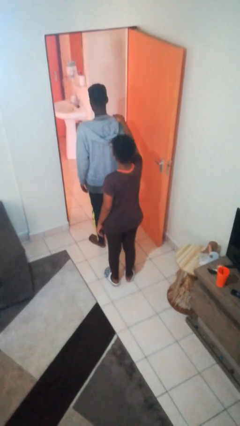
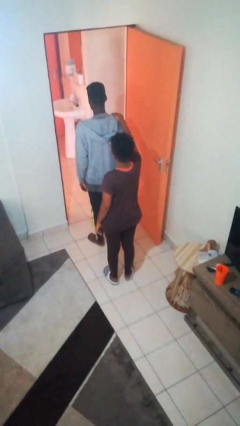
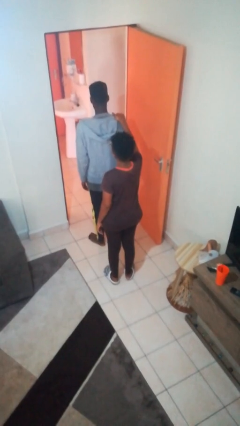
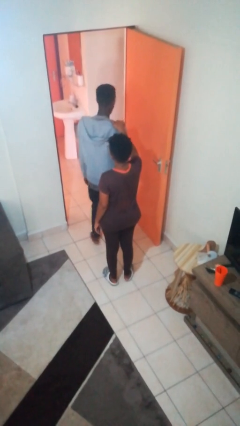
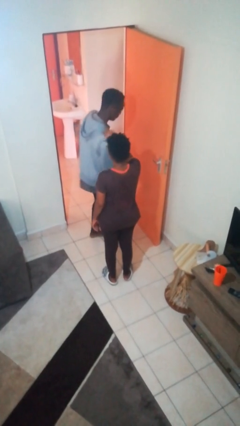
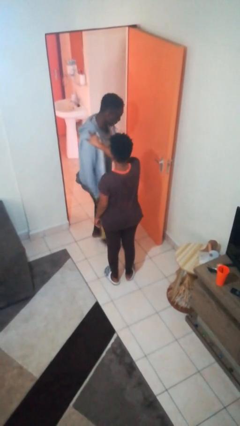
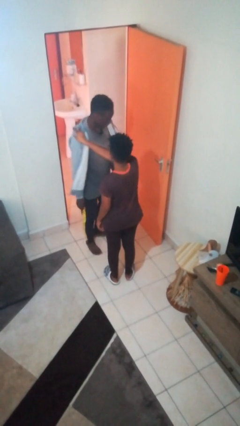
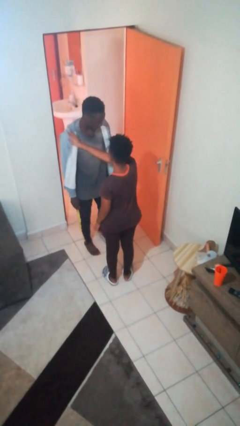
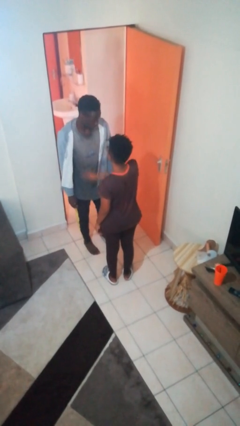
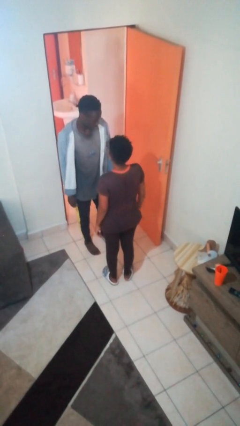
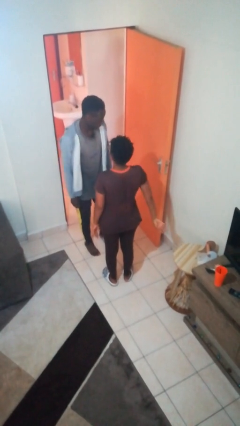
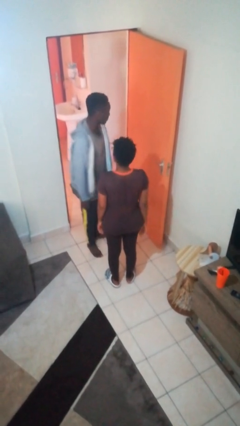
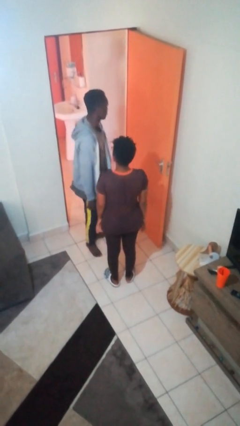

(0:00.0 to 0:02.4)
person spins person around

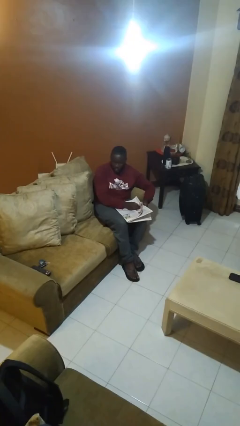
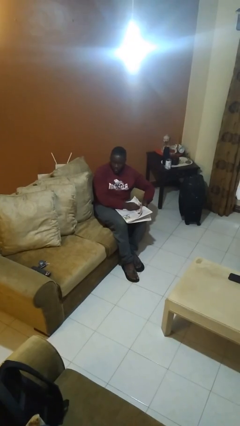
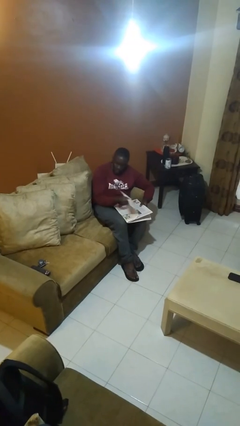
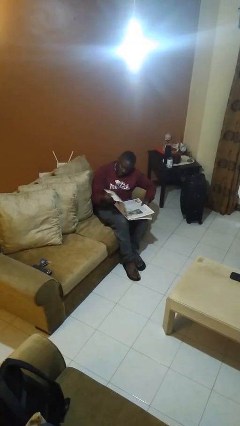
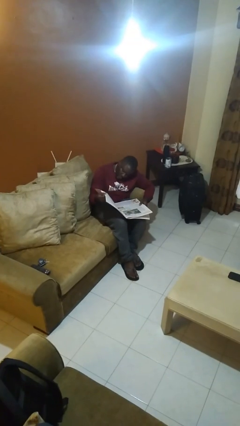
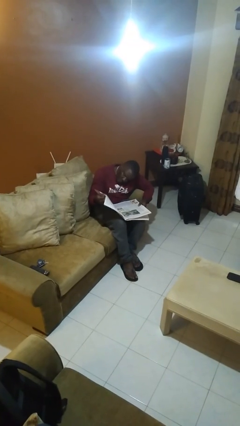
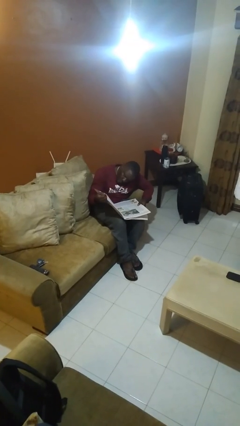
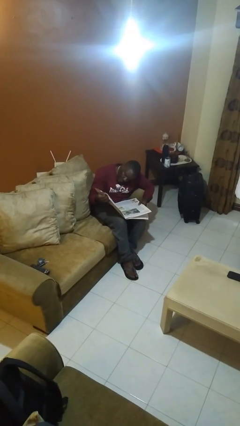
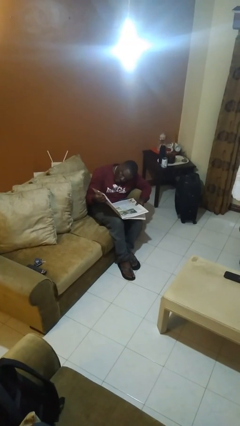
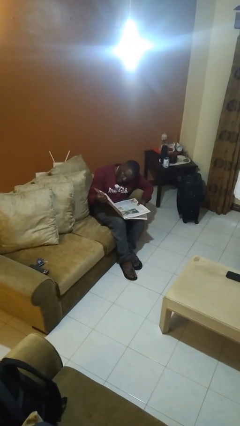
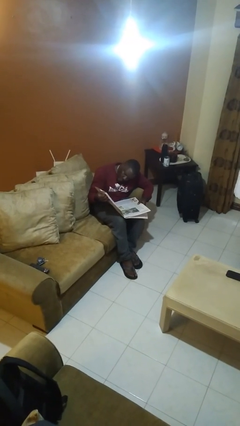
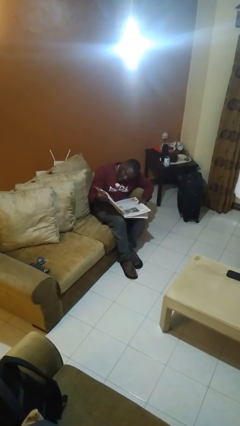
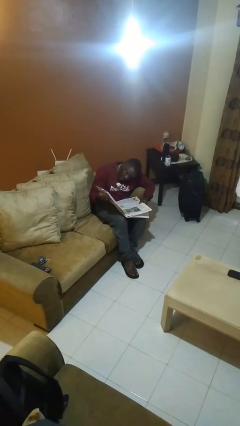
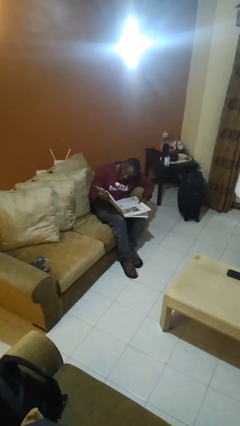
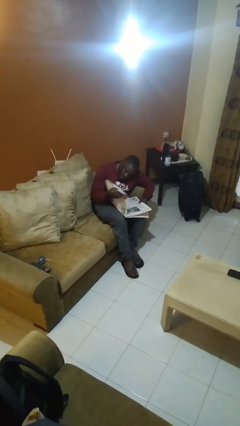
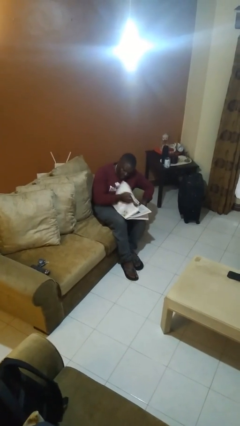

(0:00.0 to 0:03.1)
person reads newspaper

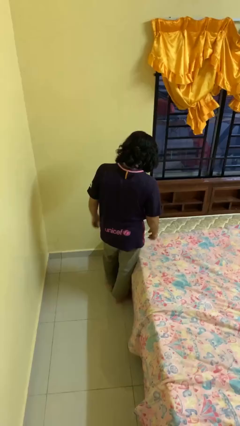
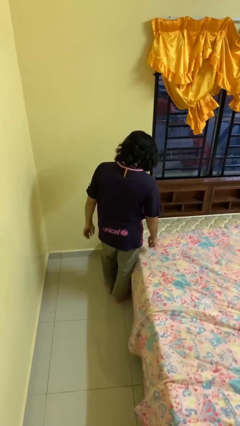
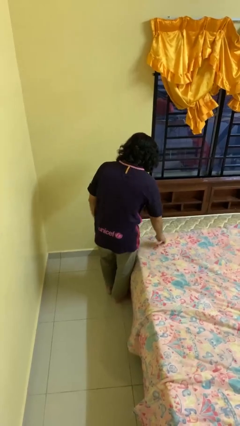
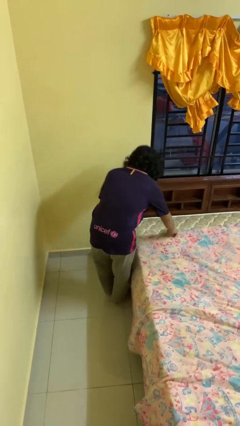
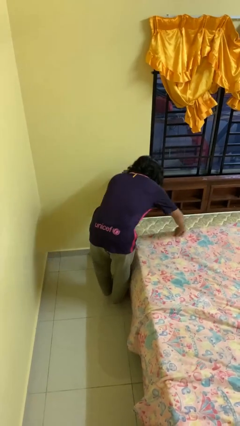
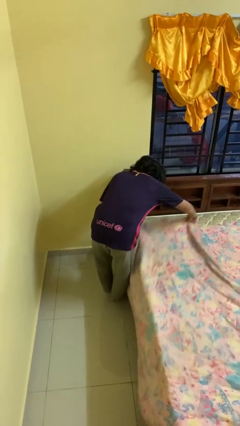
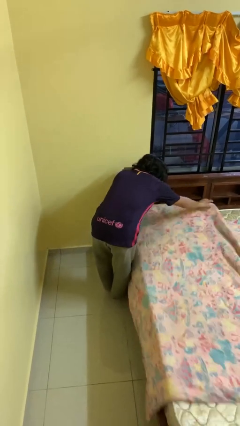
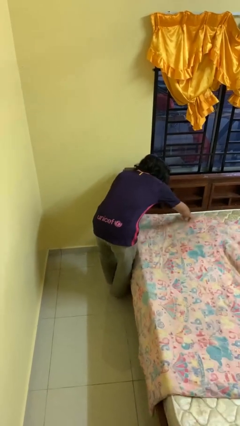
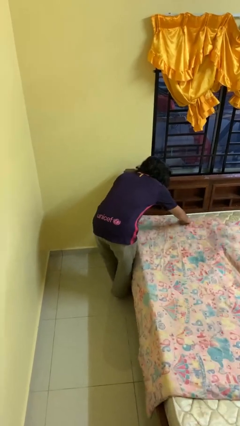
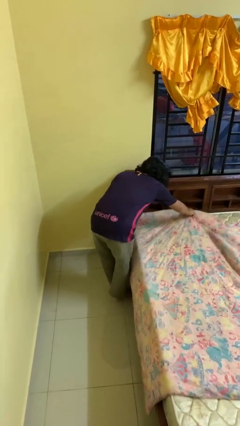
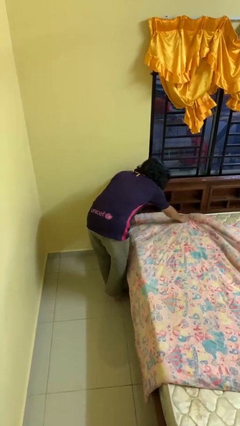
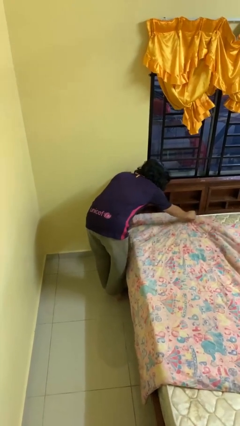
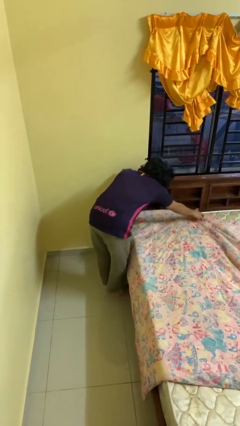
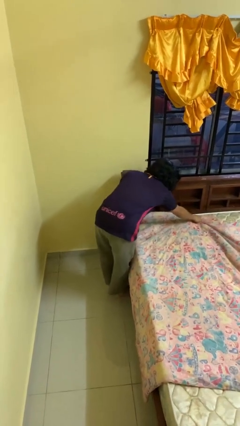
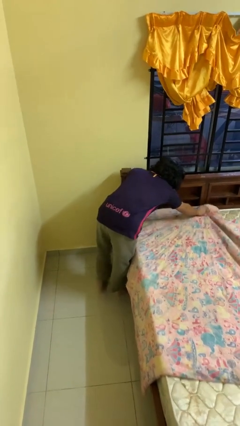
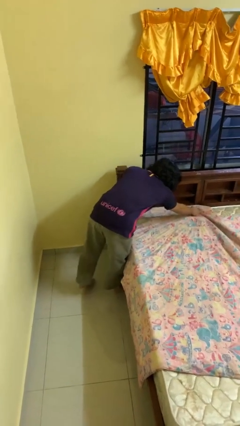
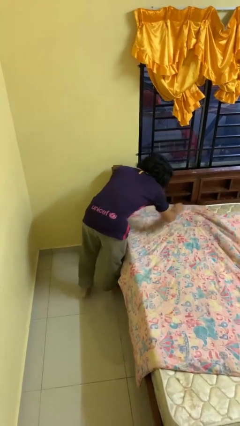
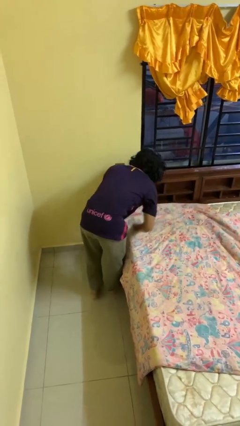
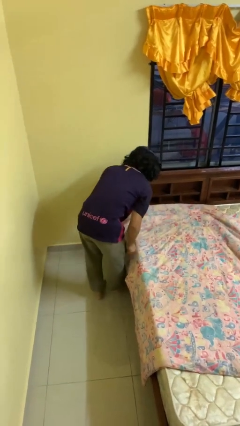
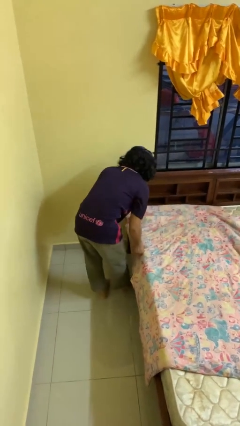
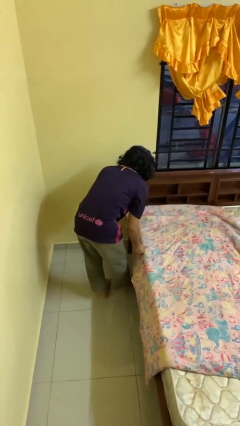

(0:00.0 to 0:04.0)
person makes bed

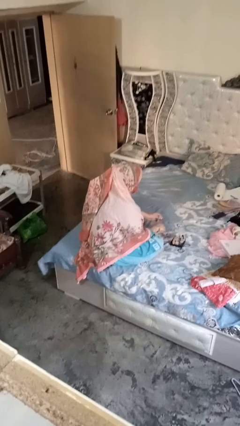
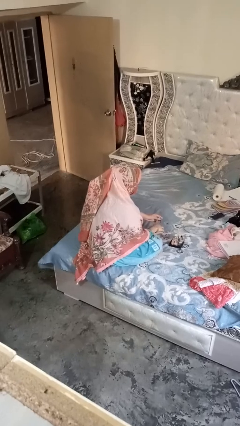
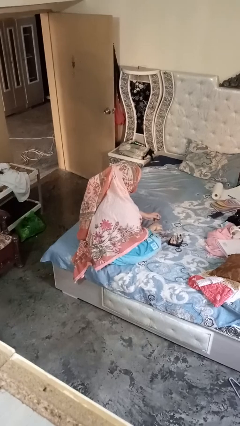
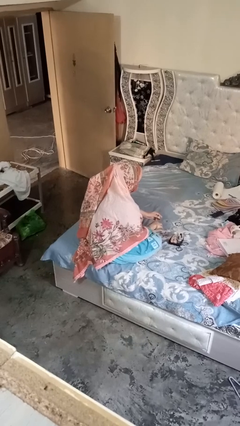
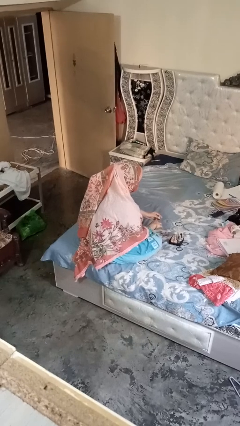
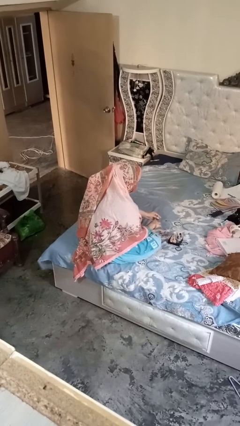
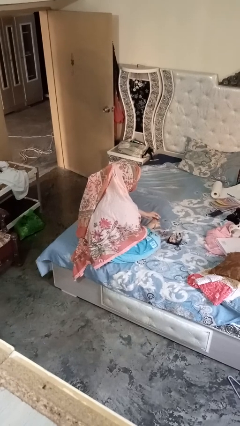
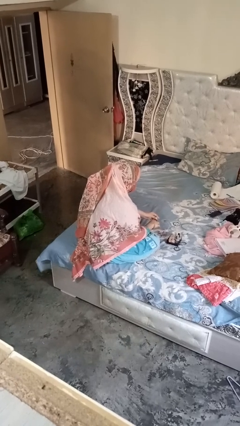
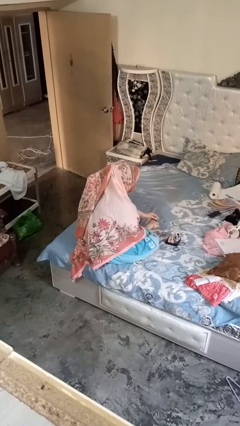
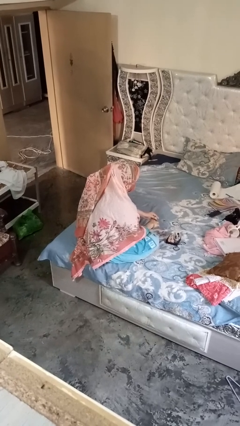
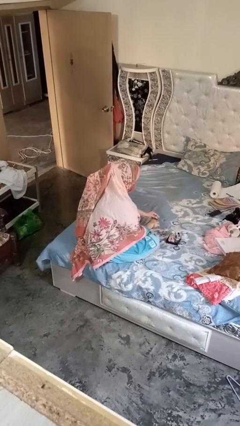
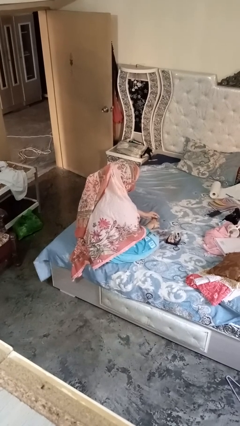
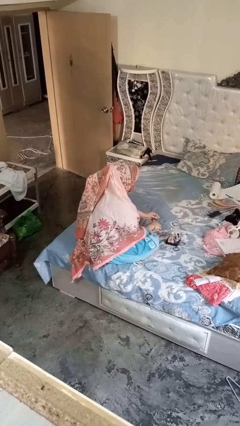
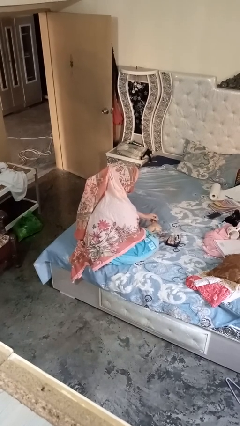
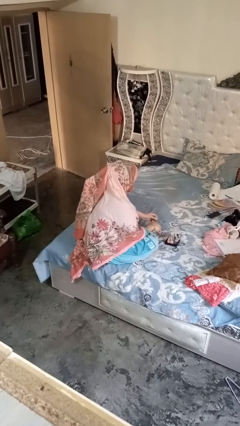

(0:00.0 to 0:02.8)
person paints fingernails

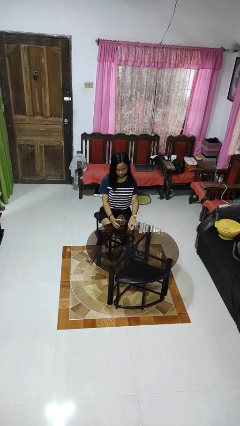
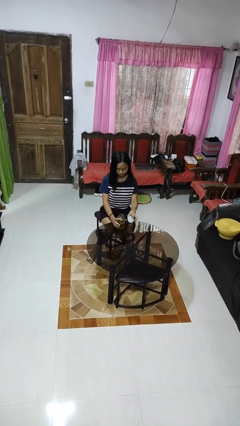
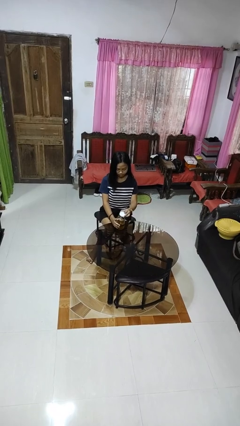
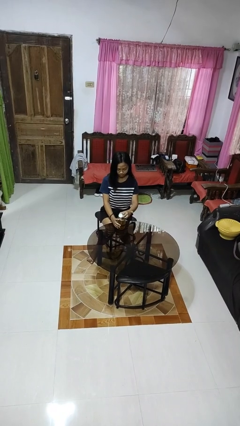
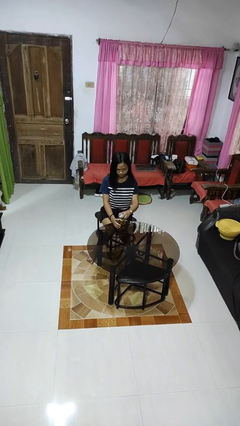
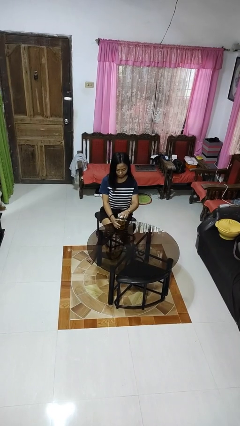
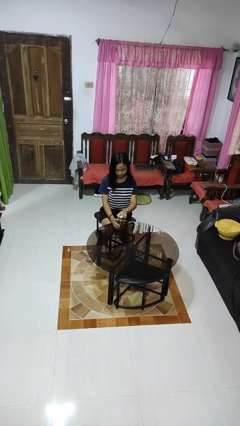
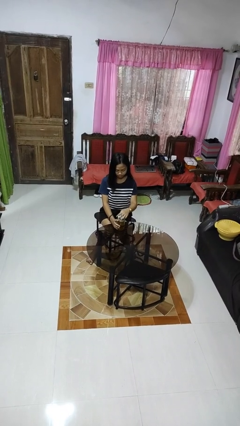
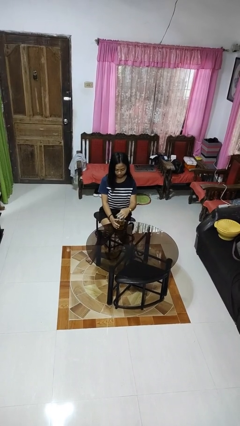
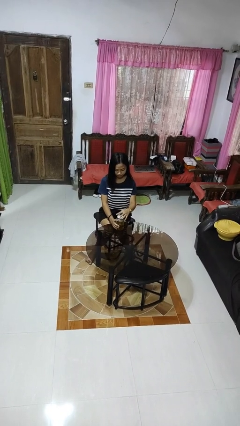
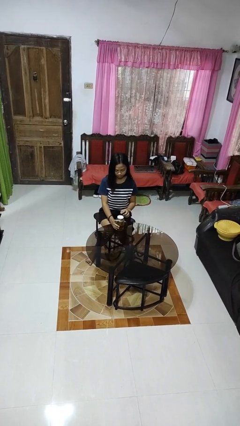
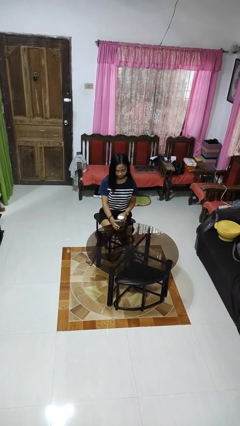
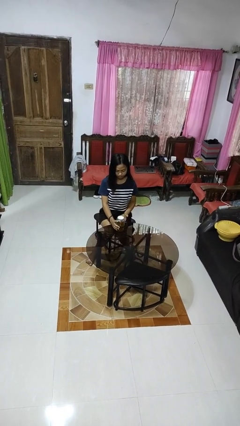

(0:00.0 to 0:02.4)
person closes jar

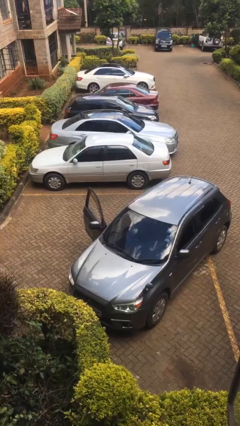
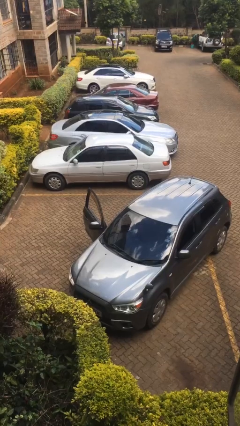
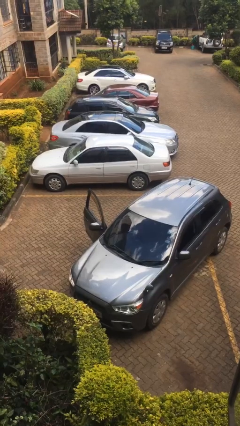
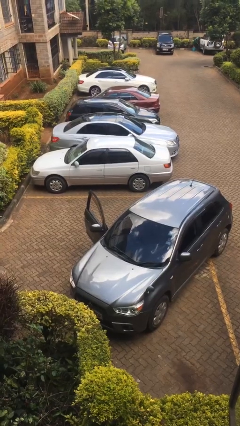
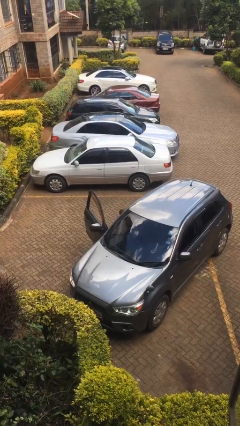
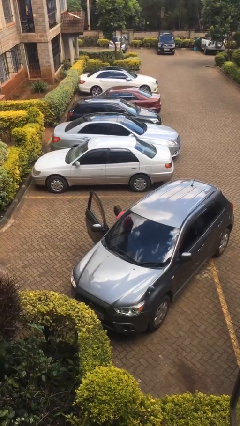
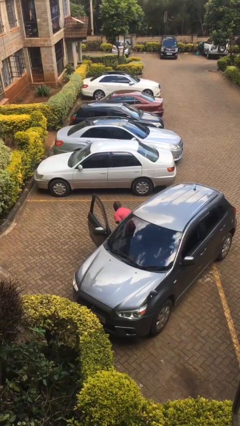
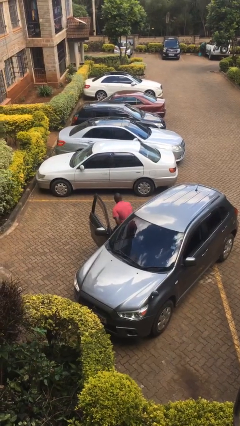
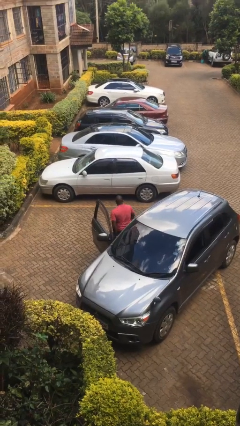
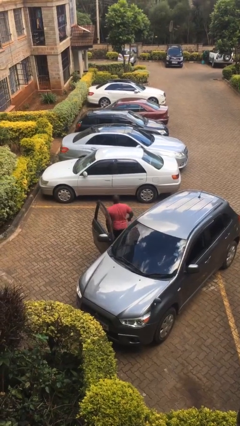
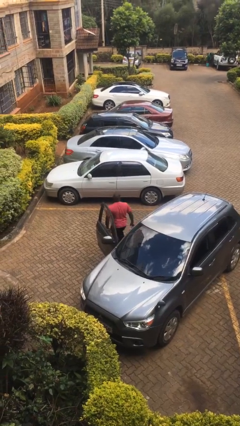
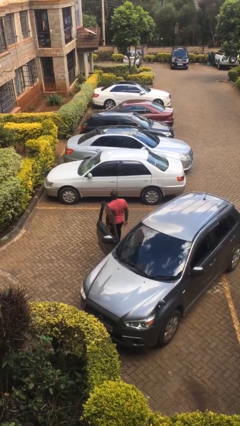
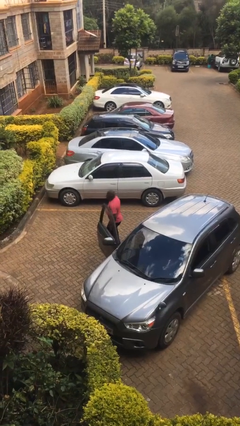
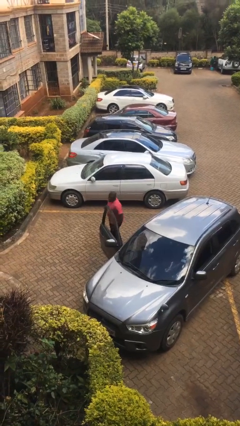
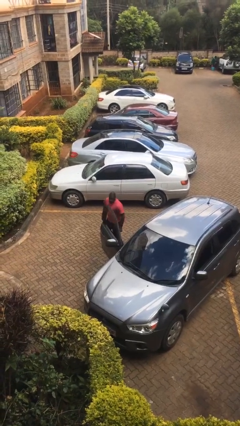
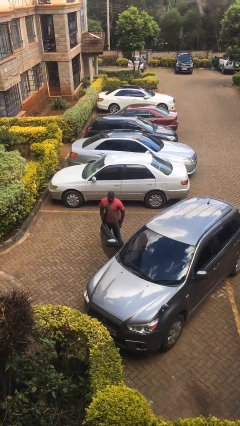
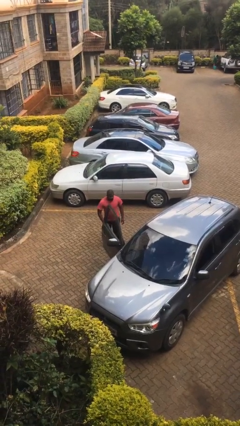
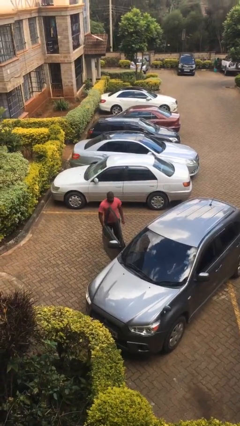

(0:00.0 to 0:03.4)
person exits car
